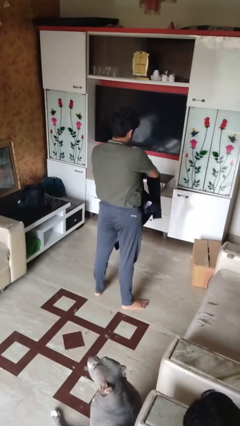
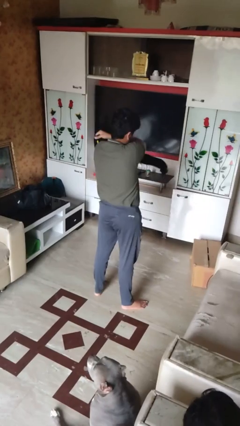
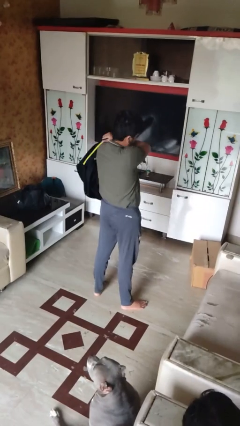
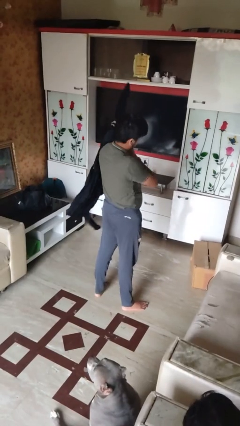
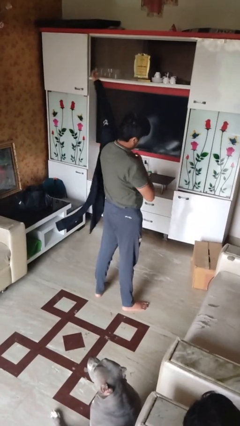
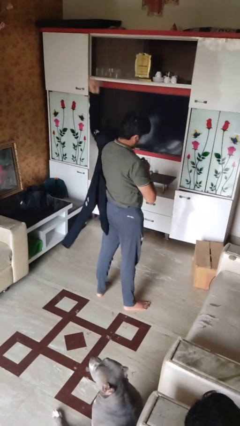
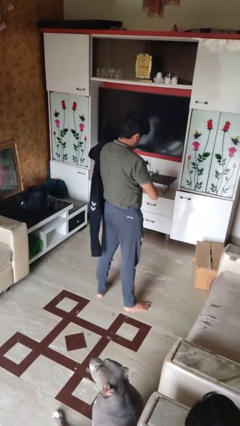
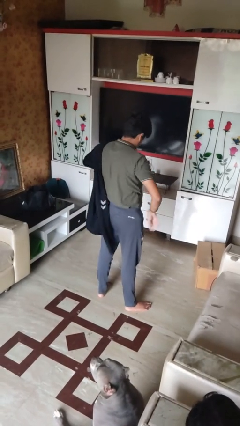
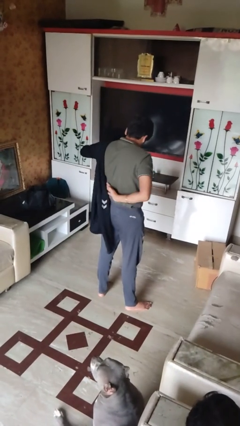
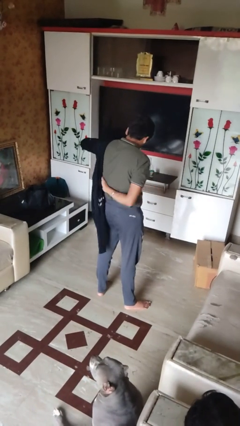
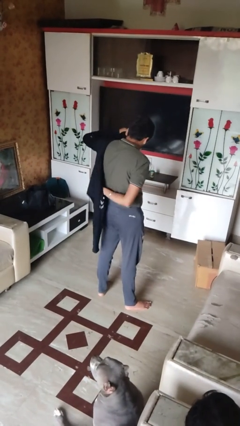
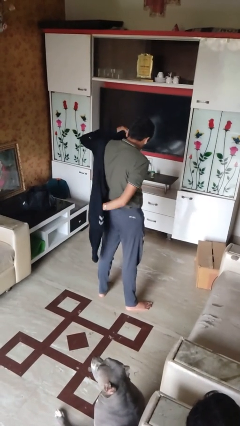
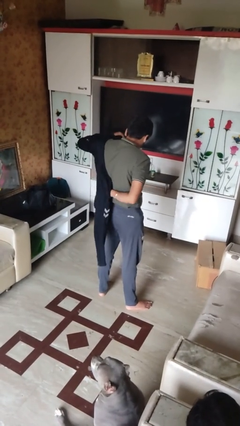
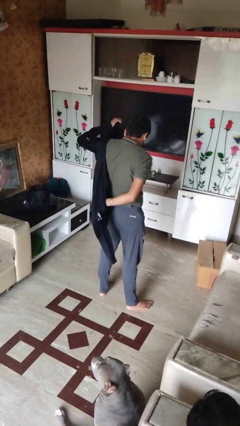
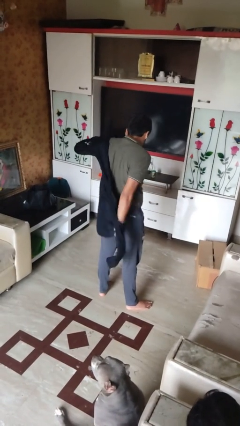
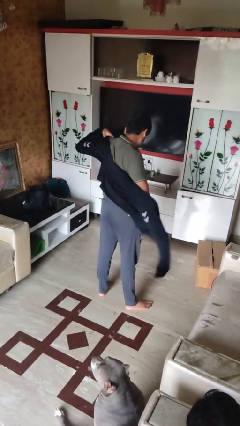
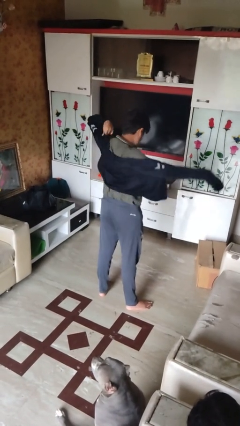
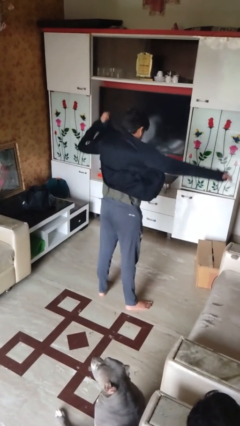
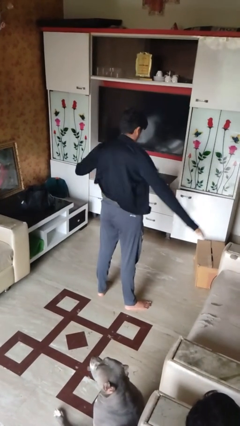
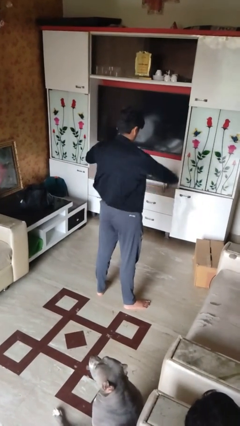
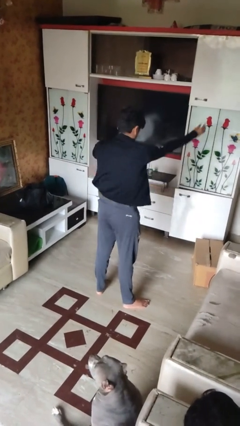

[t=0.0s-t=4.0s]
person puts on jacket

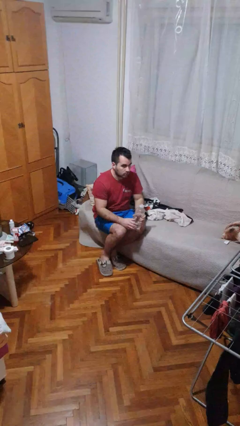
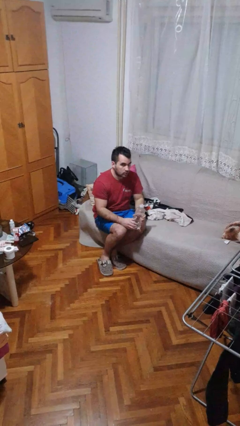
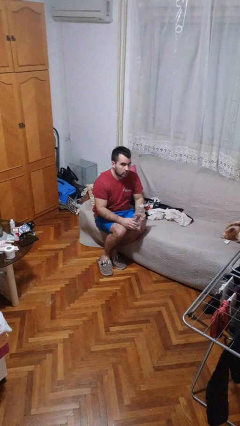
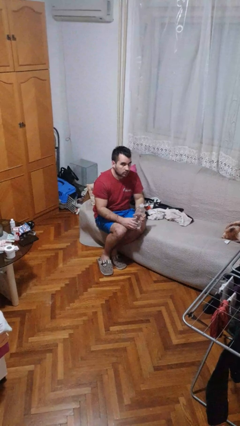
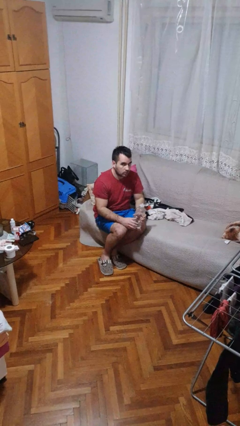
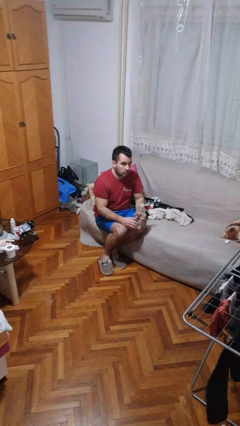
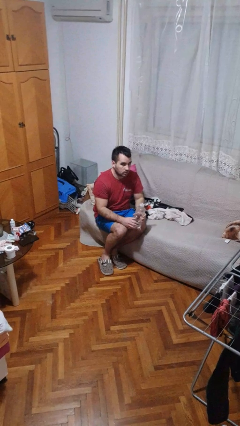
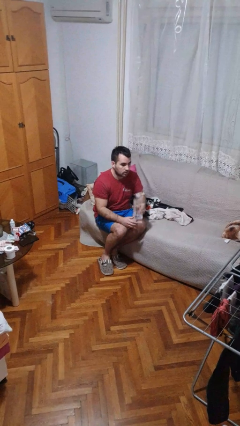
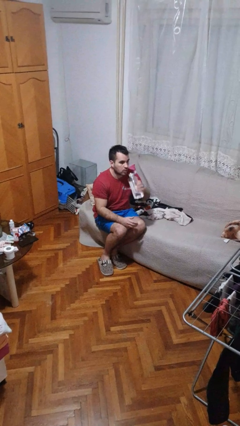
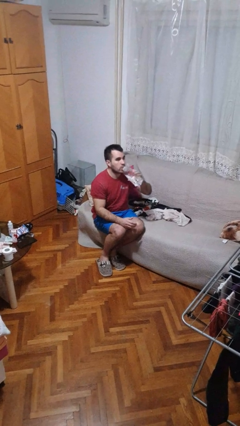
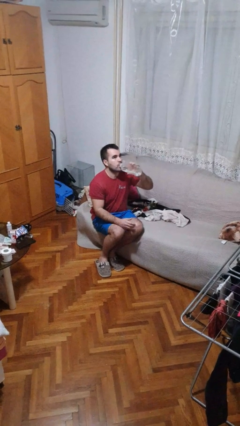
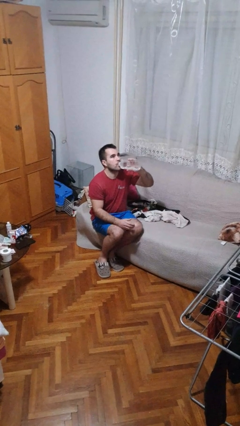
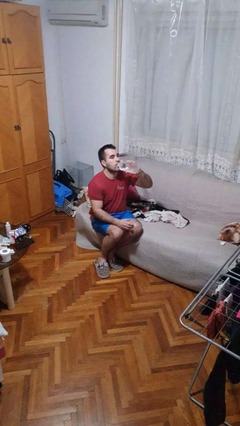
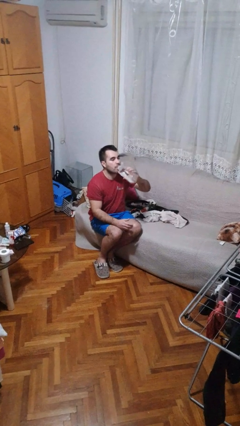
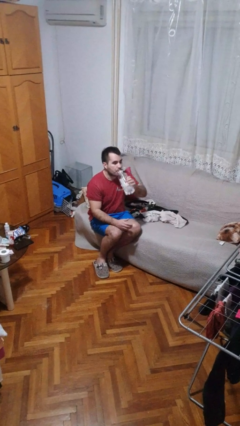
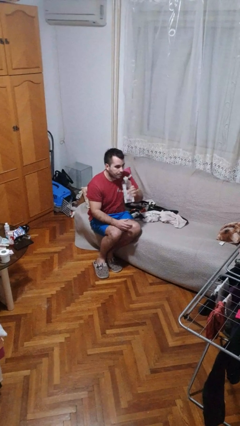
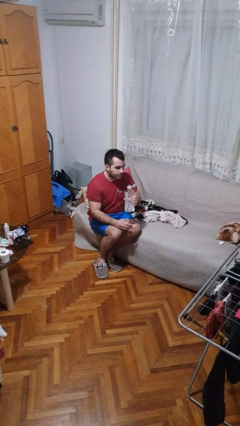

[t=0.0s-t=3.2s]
person drinks from bottle

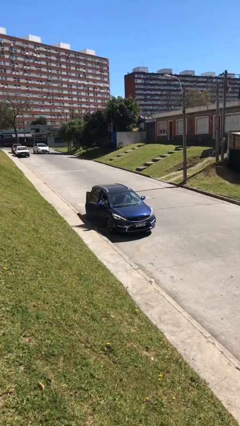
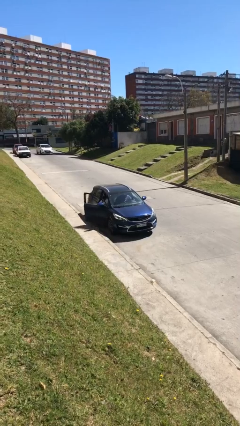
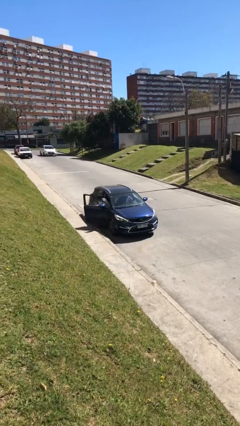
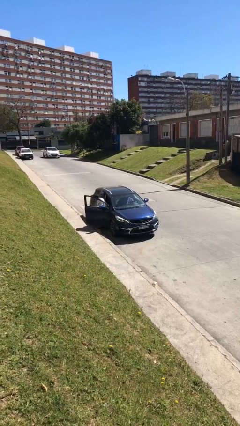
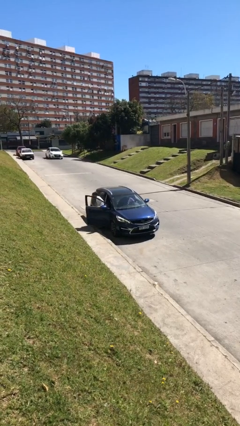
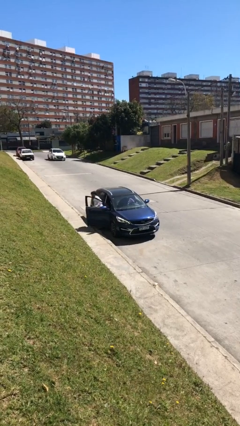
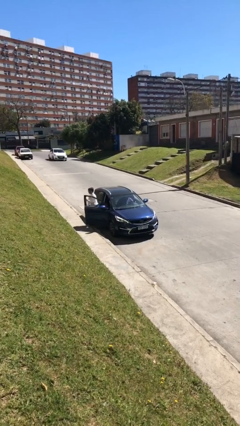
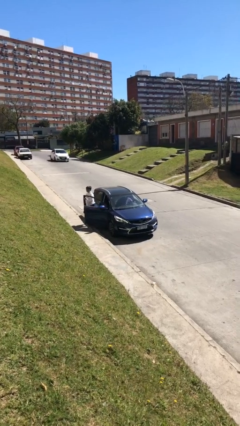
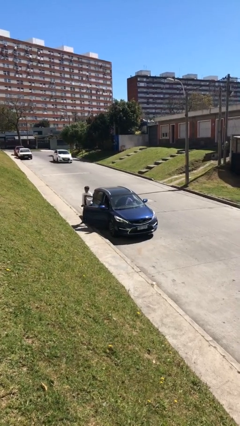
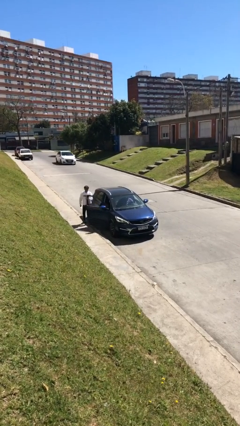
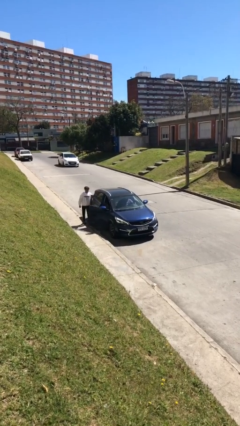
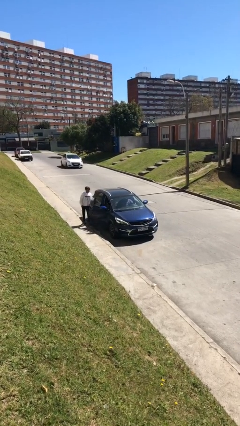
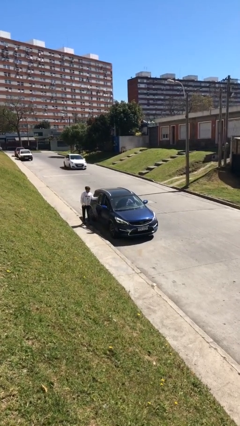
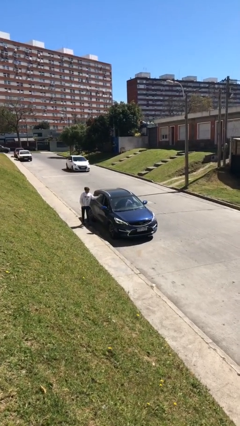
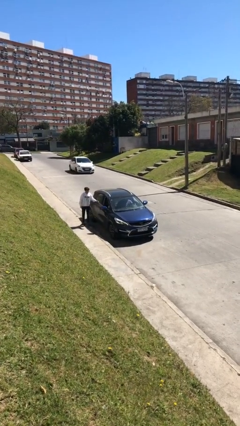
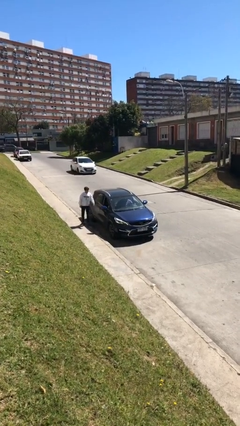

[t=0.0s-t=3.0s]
car drops off person

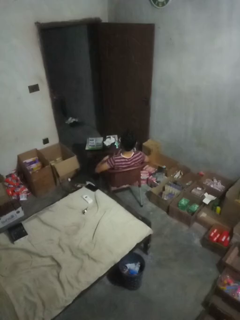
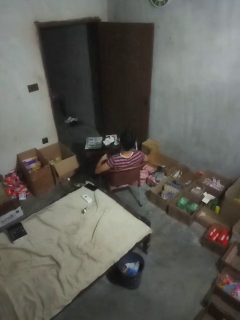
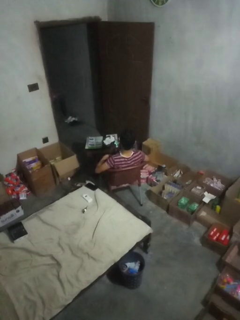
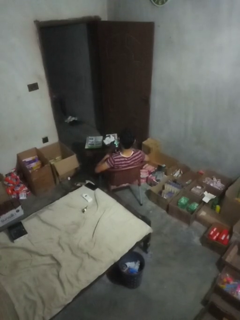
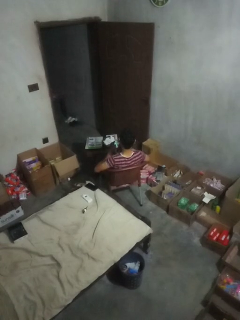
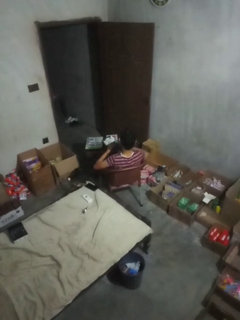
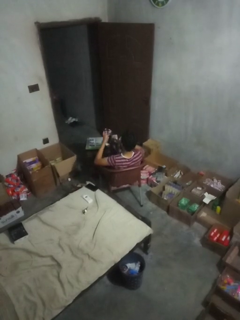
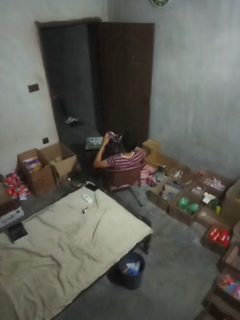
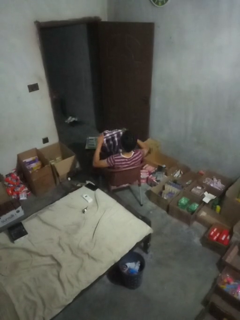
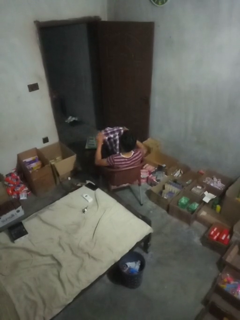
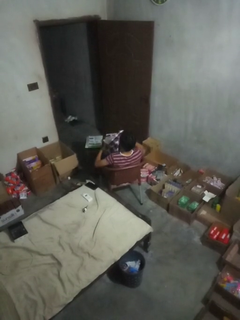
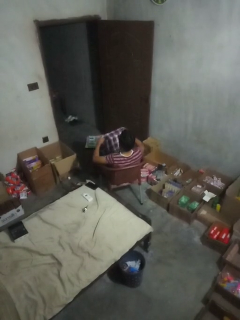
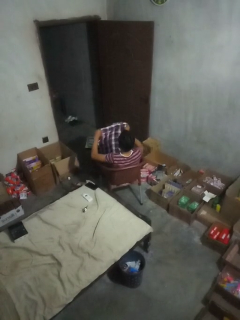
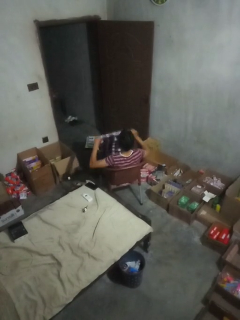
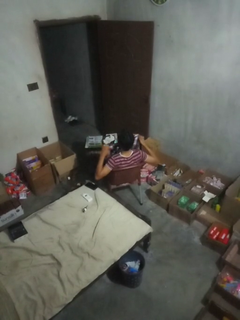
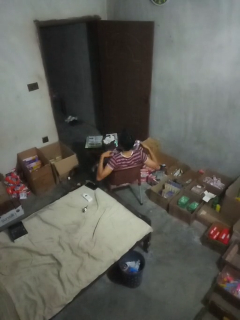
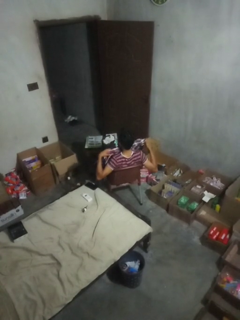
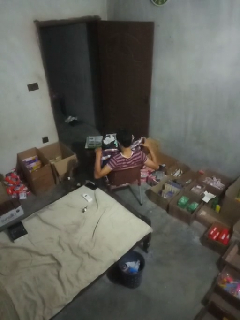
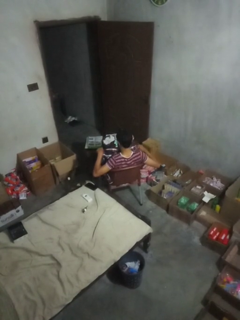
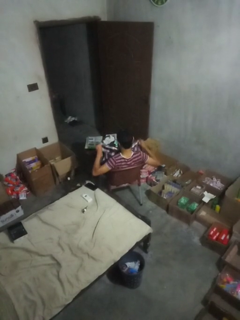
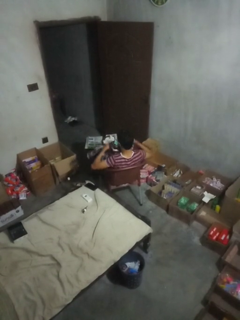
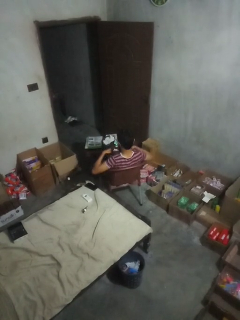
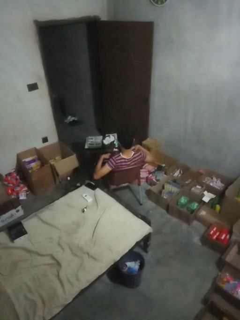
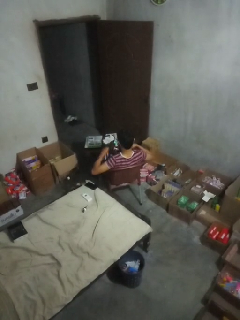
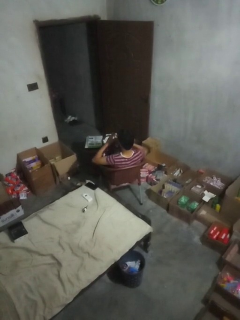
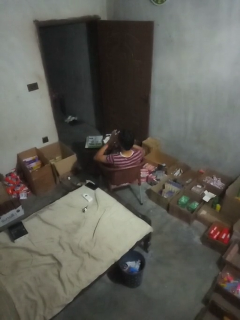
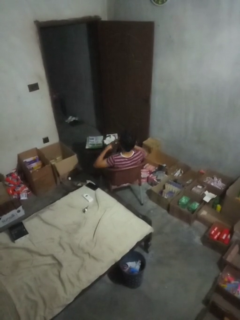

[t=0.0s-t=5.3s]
person folds shirt

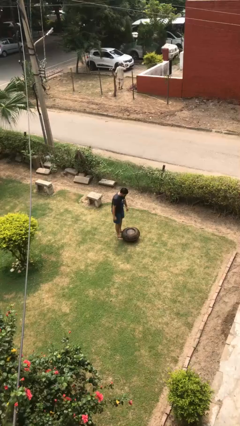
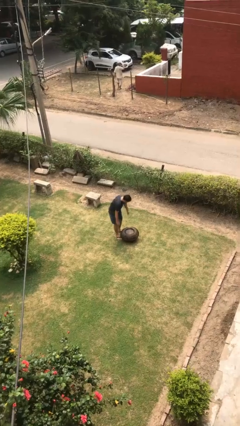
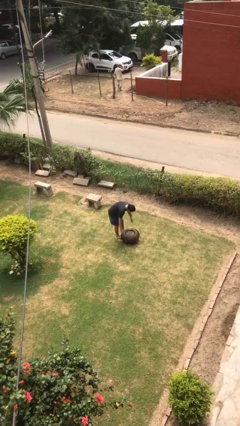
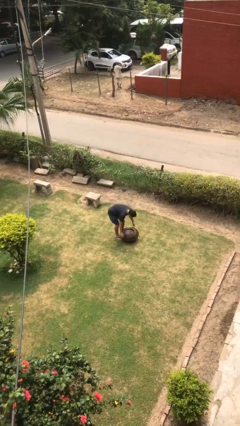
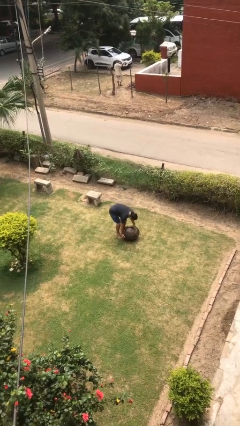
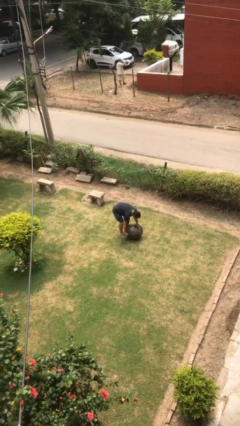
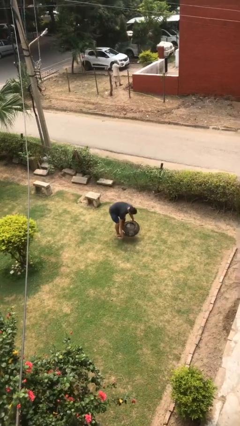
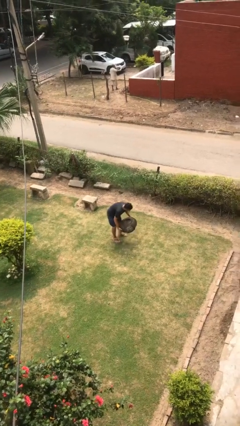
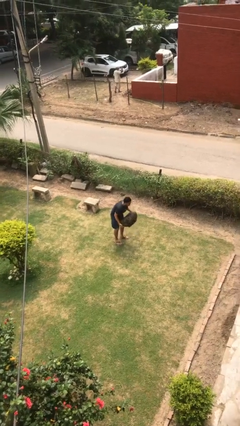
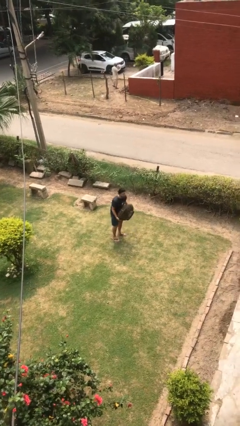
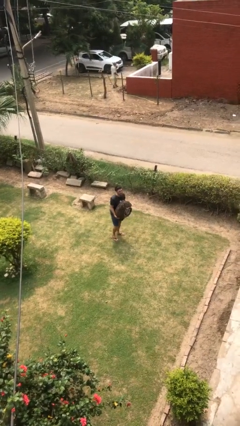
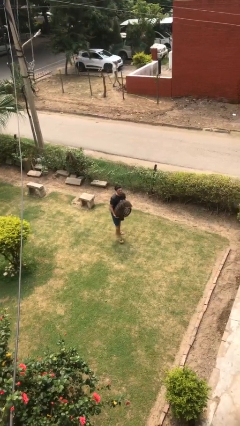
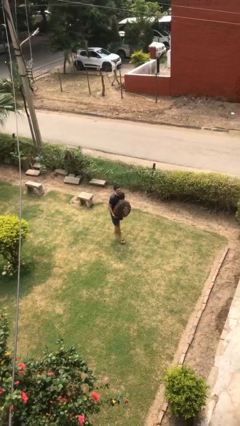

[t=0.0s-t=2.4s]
person picks up object from floor

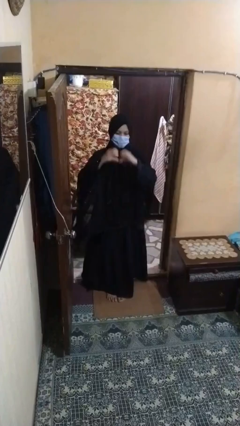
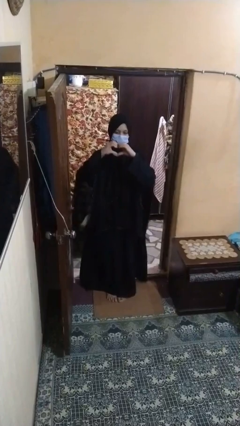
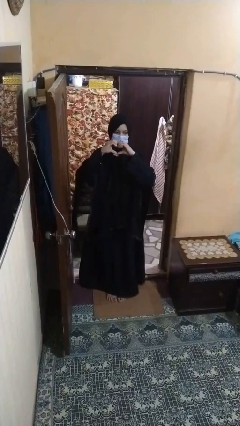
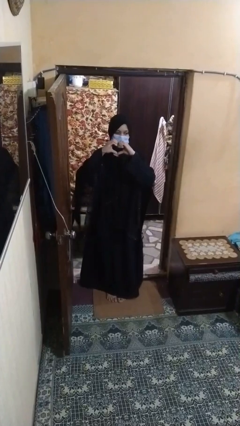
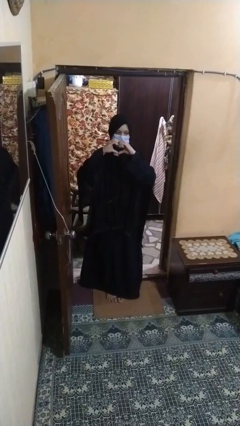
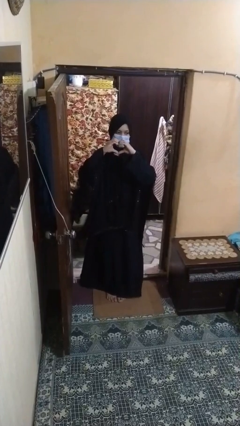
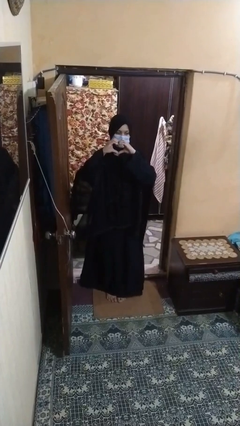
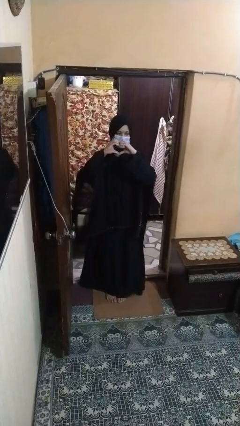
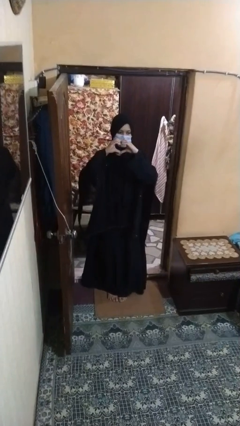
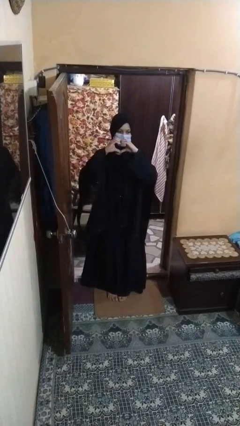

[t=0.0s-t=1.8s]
person gestures heart
